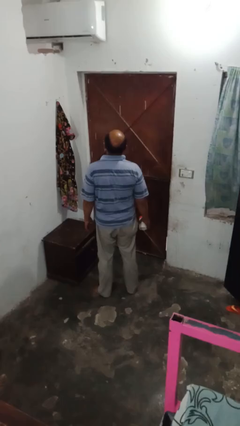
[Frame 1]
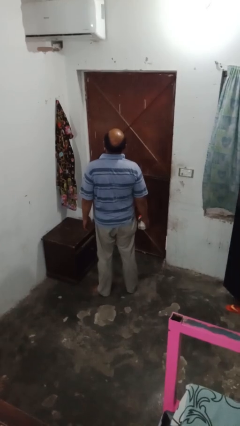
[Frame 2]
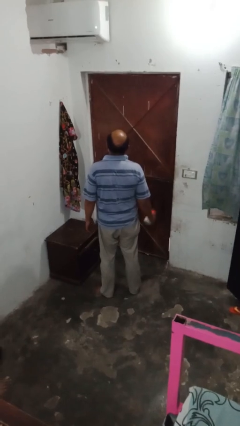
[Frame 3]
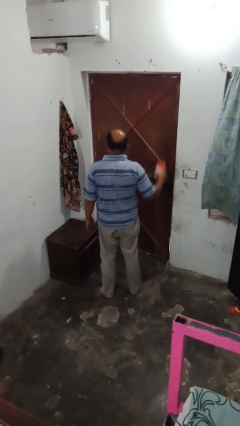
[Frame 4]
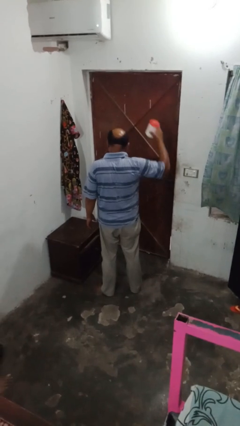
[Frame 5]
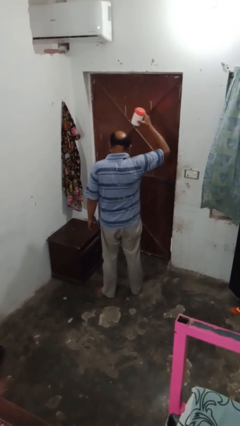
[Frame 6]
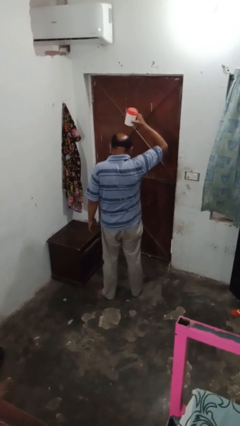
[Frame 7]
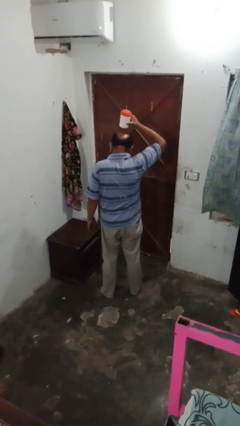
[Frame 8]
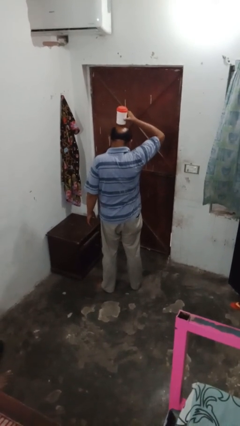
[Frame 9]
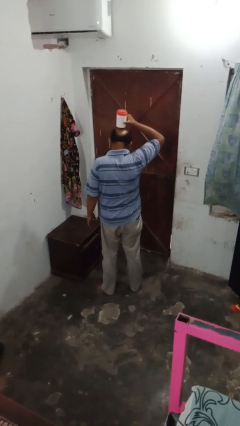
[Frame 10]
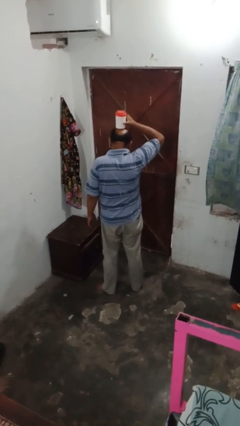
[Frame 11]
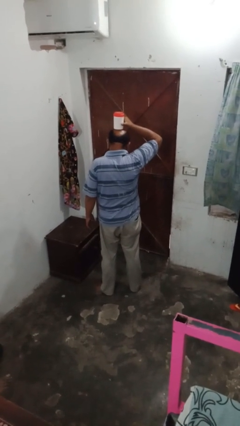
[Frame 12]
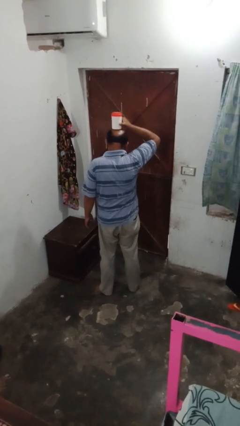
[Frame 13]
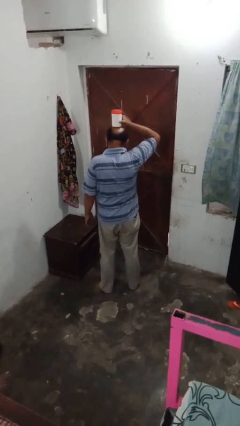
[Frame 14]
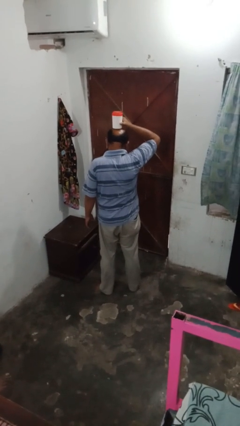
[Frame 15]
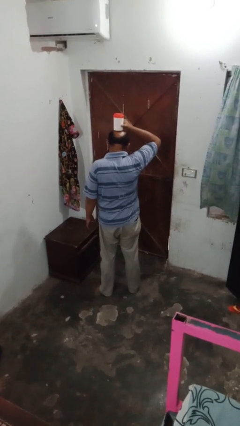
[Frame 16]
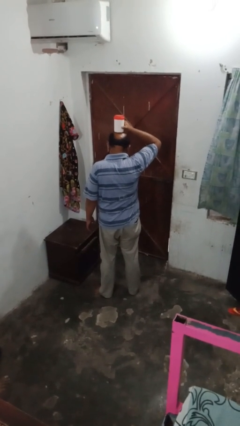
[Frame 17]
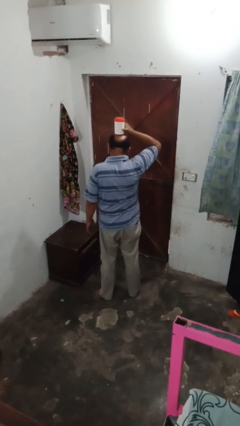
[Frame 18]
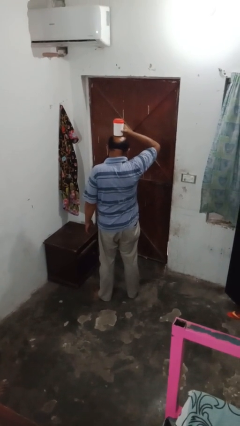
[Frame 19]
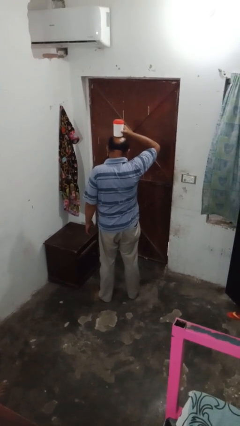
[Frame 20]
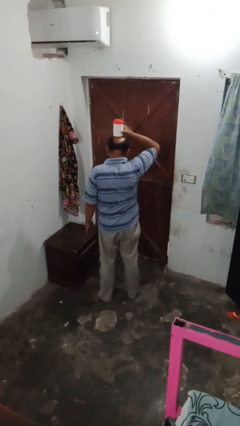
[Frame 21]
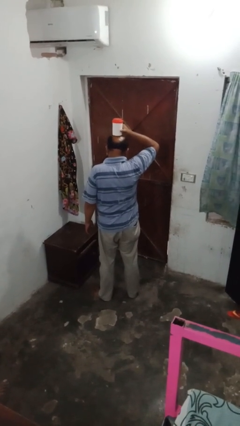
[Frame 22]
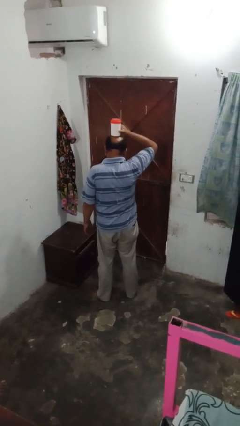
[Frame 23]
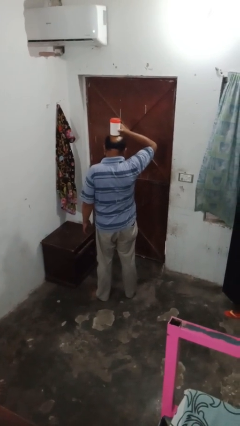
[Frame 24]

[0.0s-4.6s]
person holds object above head

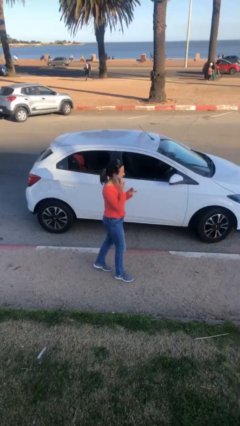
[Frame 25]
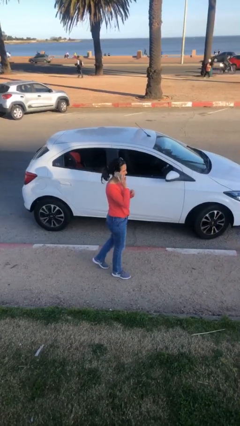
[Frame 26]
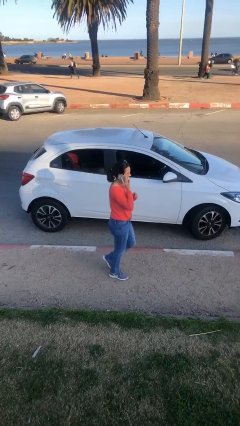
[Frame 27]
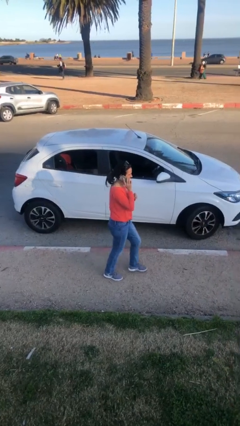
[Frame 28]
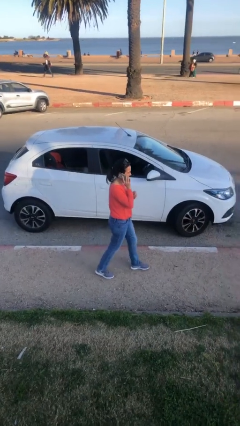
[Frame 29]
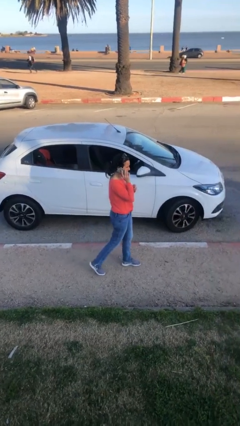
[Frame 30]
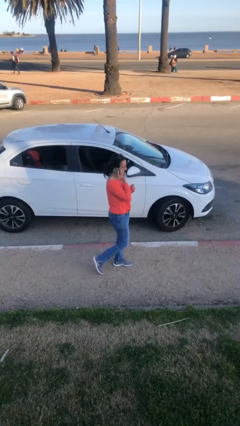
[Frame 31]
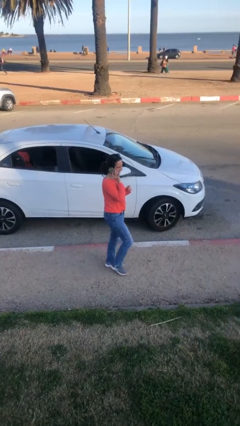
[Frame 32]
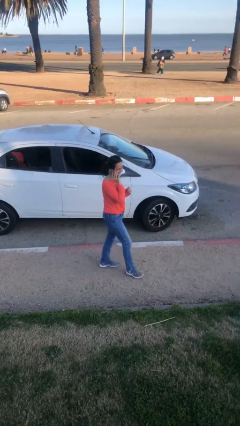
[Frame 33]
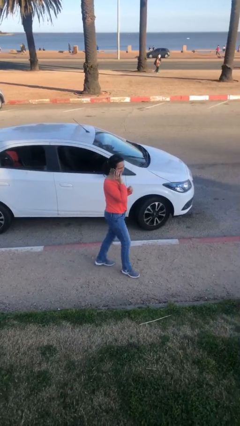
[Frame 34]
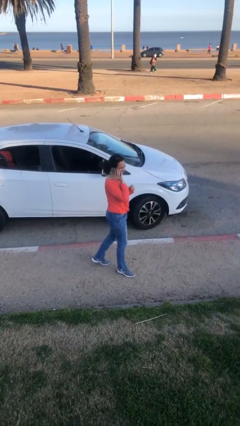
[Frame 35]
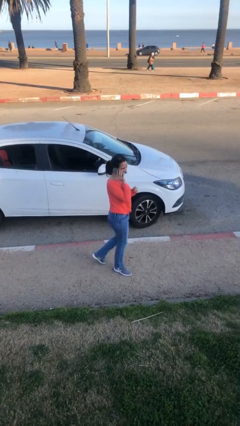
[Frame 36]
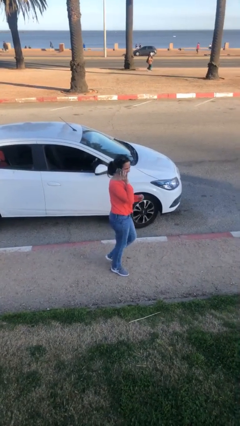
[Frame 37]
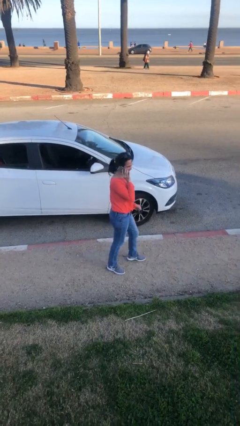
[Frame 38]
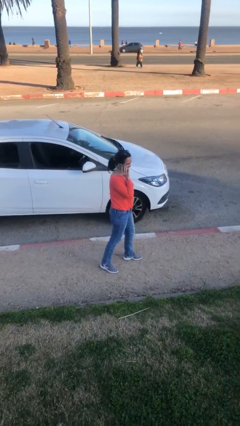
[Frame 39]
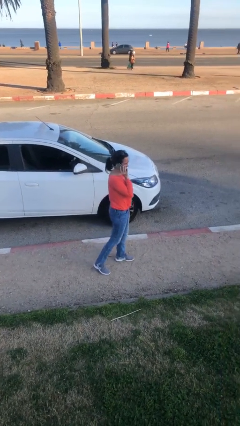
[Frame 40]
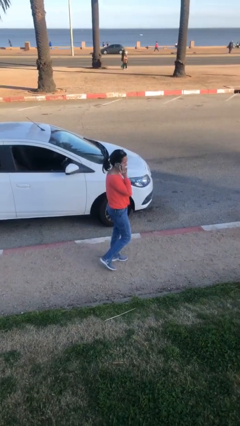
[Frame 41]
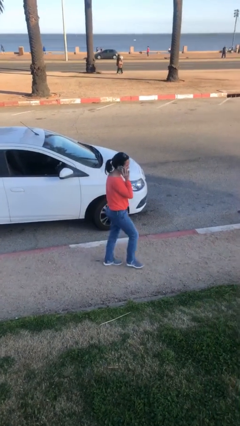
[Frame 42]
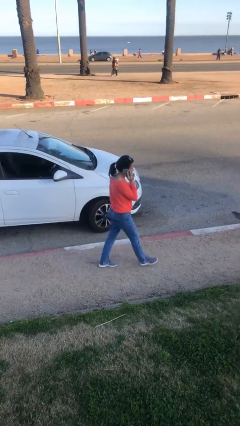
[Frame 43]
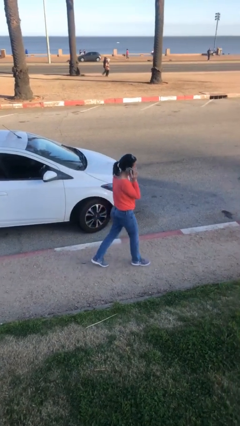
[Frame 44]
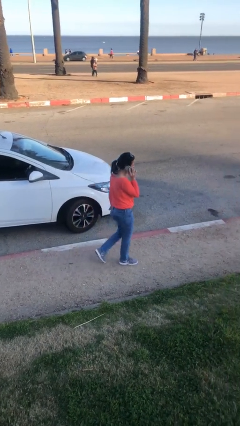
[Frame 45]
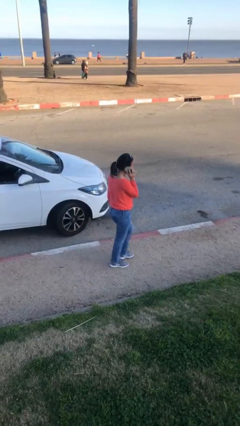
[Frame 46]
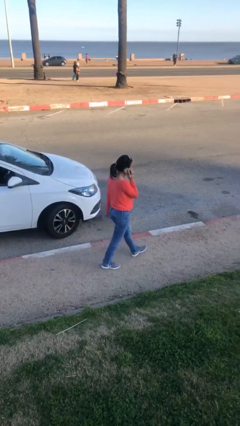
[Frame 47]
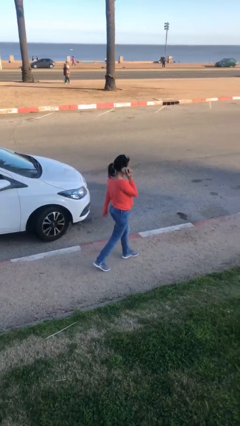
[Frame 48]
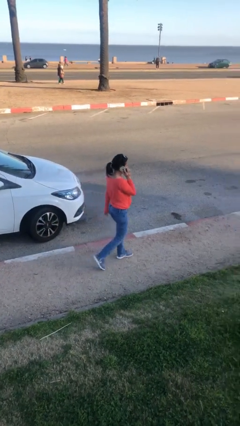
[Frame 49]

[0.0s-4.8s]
person talks on phone

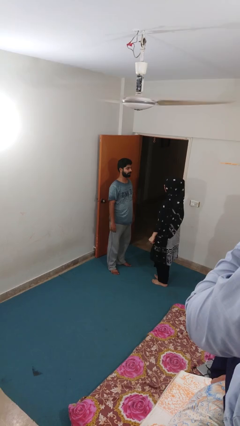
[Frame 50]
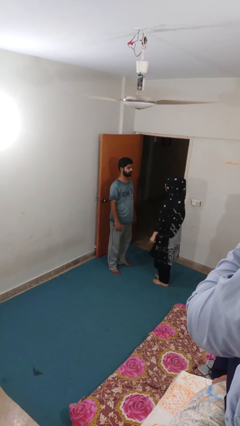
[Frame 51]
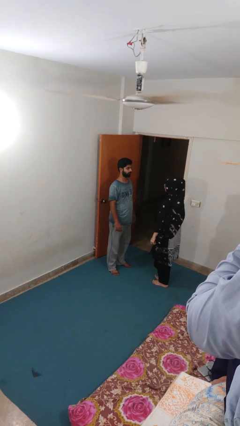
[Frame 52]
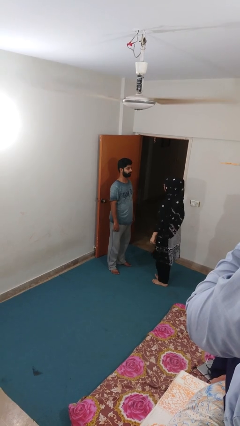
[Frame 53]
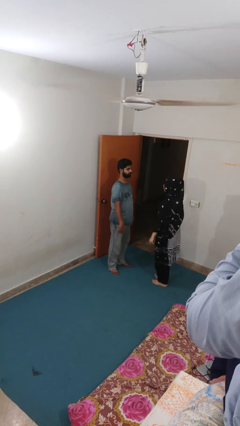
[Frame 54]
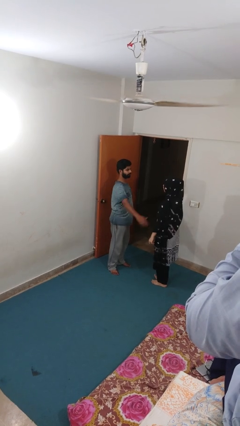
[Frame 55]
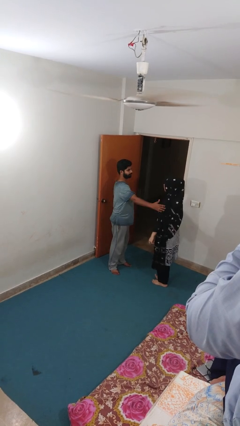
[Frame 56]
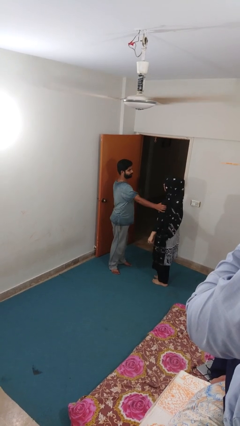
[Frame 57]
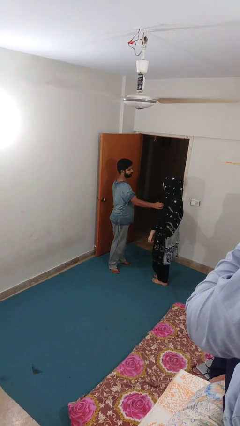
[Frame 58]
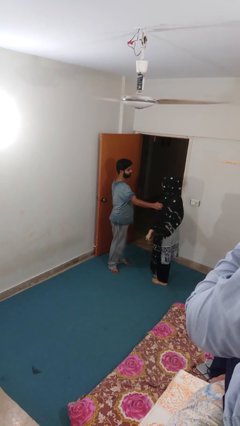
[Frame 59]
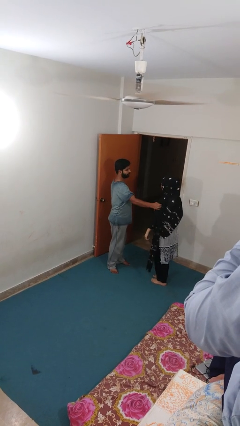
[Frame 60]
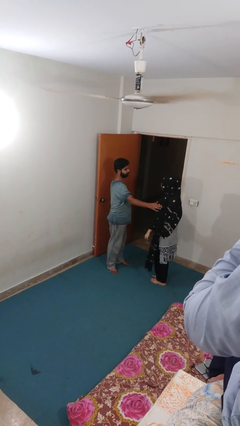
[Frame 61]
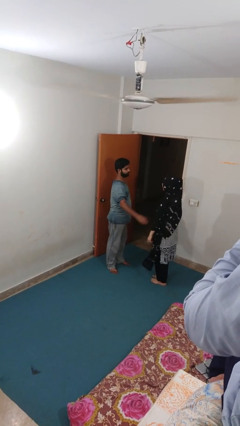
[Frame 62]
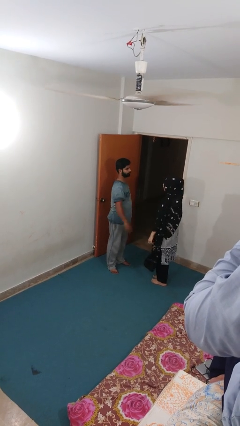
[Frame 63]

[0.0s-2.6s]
person grabs person by bicep

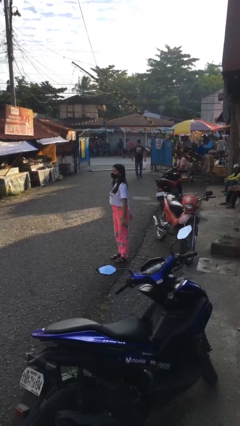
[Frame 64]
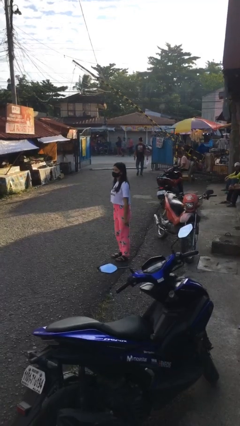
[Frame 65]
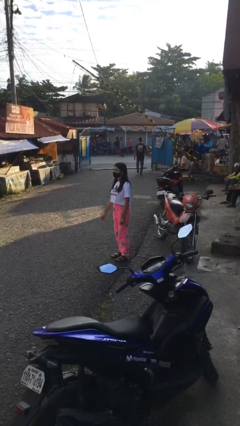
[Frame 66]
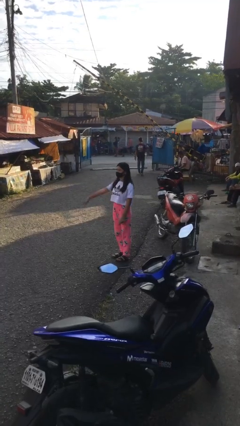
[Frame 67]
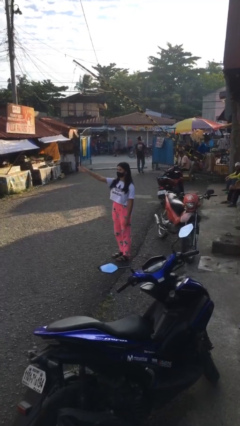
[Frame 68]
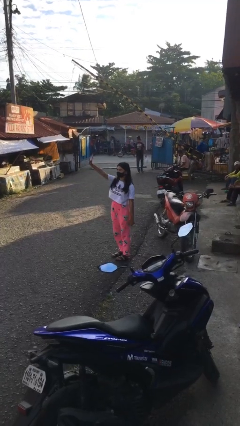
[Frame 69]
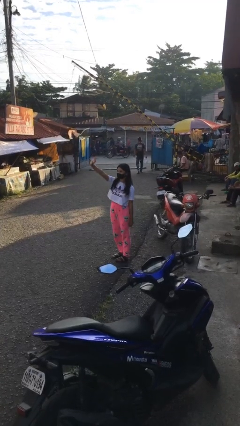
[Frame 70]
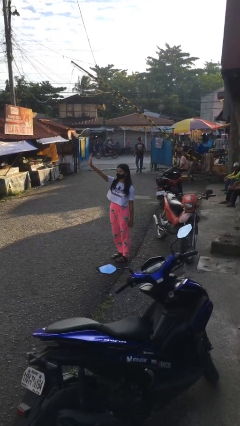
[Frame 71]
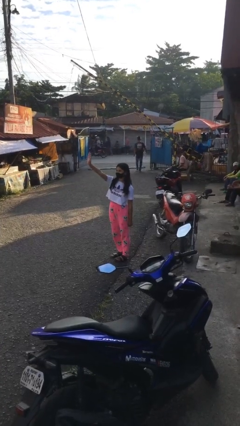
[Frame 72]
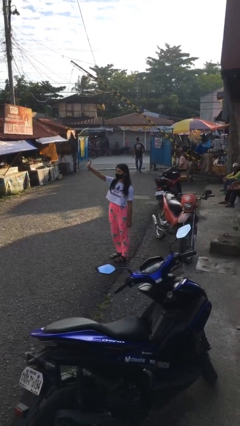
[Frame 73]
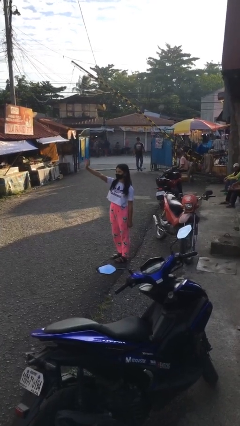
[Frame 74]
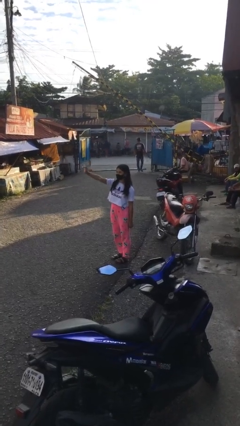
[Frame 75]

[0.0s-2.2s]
person waves at person

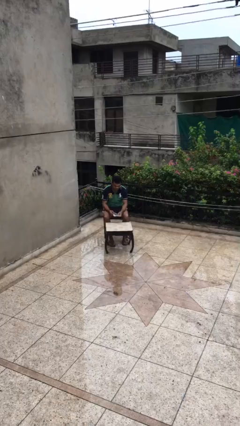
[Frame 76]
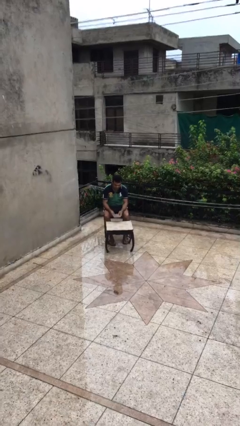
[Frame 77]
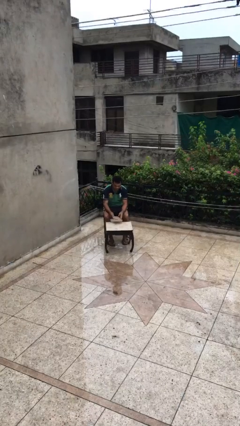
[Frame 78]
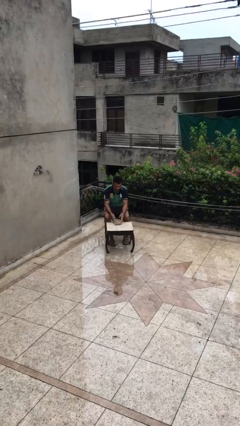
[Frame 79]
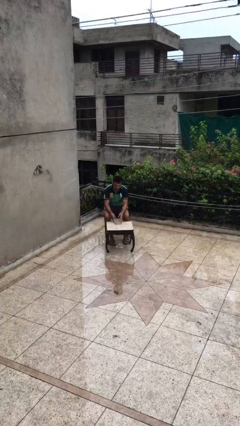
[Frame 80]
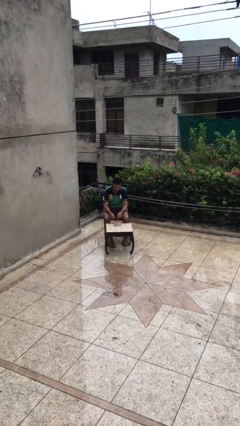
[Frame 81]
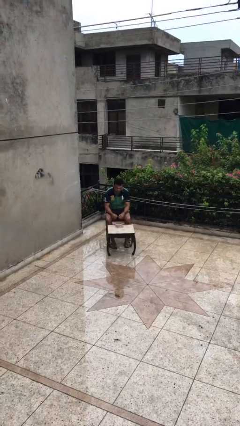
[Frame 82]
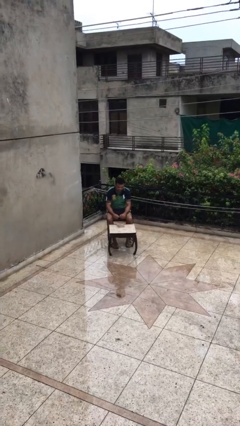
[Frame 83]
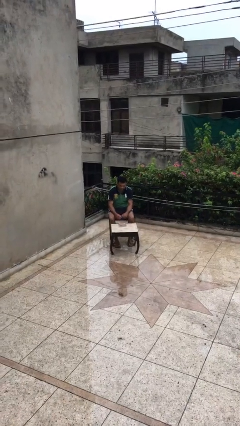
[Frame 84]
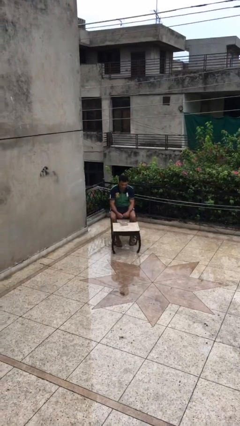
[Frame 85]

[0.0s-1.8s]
person puts down object on table

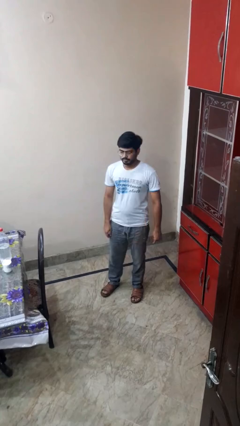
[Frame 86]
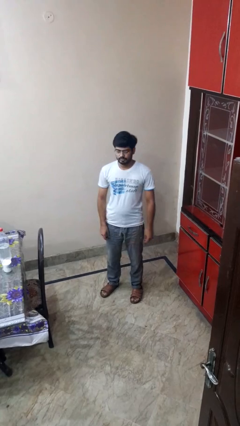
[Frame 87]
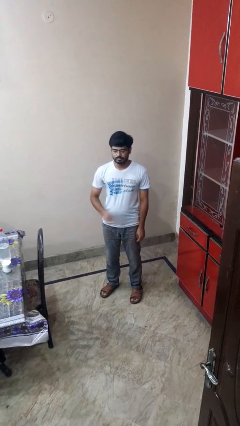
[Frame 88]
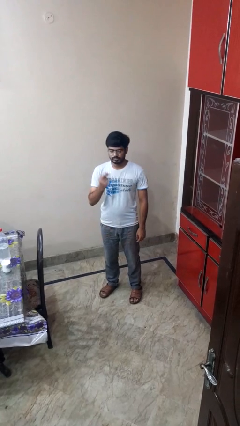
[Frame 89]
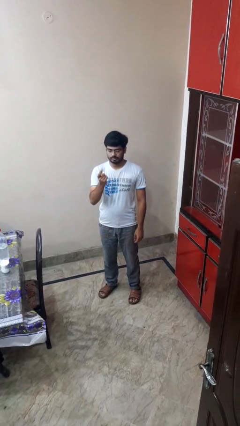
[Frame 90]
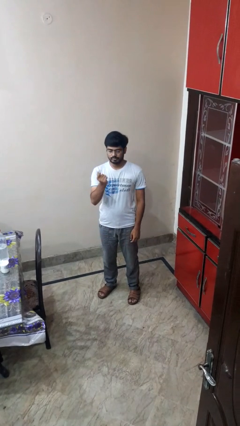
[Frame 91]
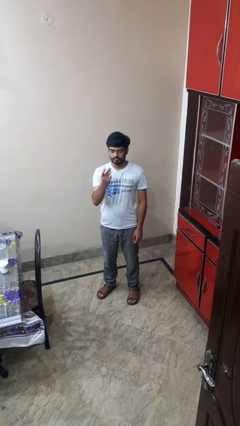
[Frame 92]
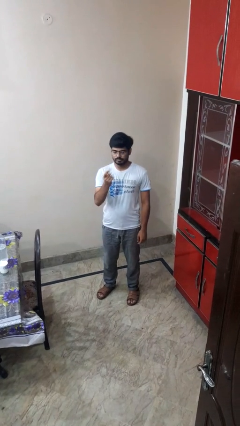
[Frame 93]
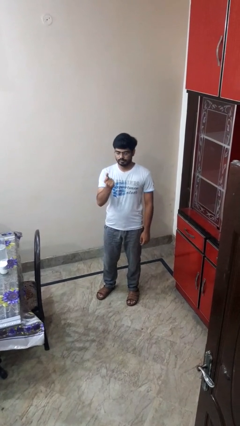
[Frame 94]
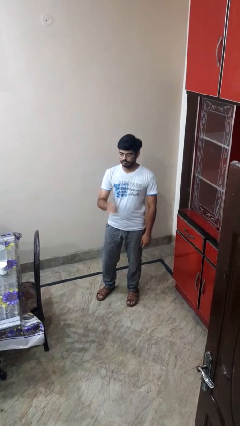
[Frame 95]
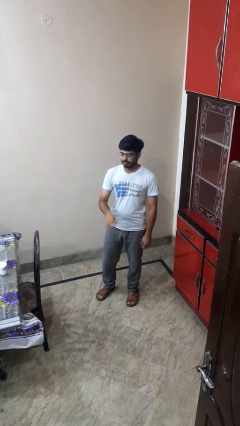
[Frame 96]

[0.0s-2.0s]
person snaps fingers
